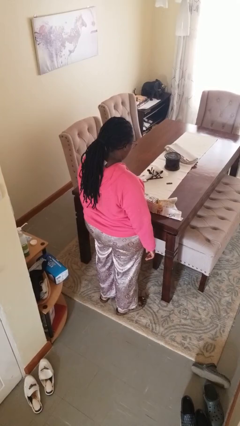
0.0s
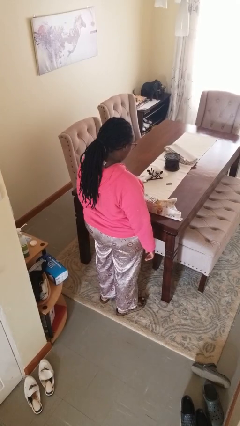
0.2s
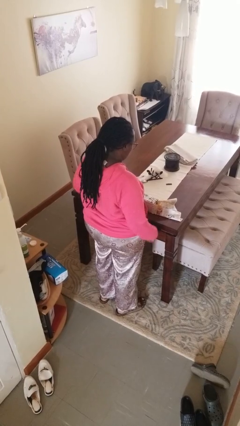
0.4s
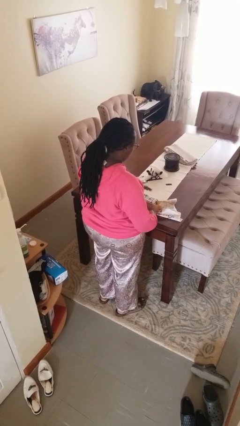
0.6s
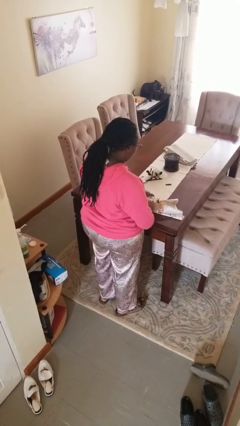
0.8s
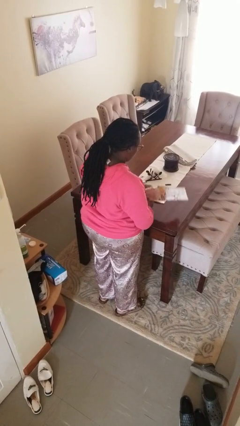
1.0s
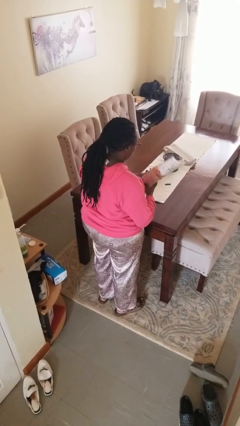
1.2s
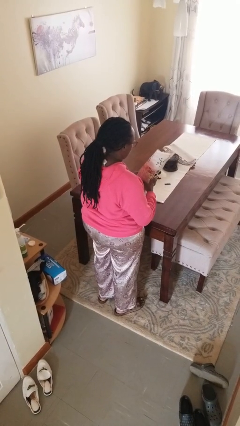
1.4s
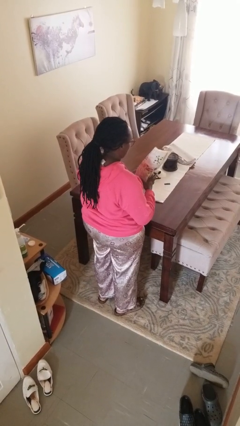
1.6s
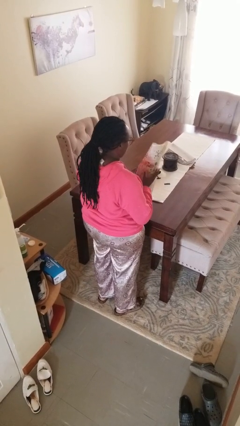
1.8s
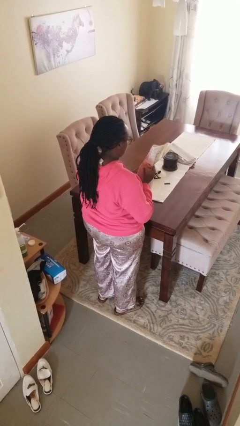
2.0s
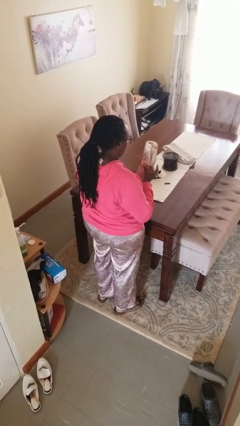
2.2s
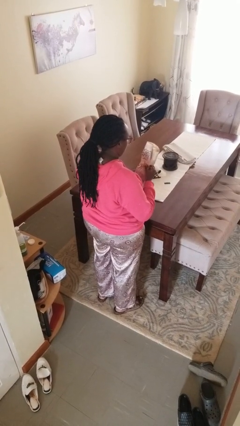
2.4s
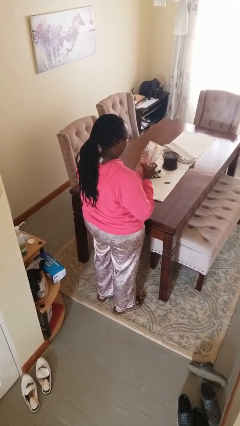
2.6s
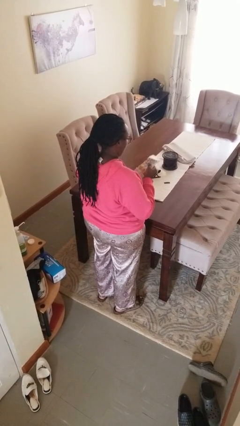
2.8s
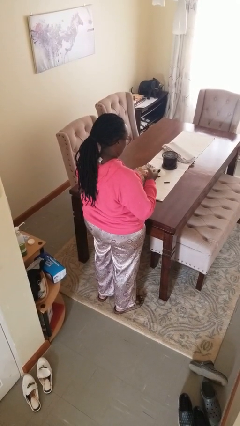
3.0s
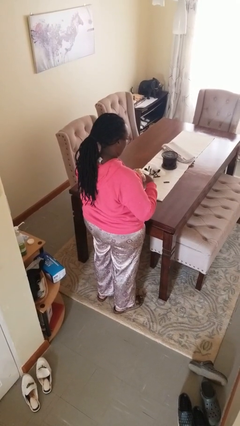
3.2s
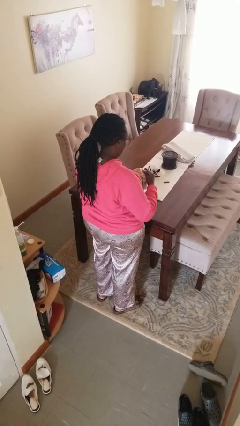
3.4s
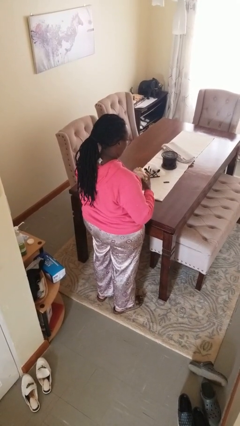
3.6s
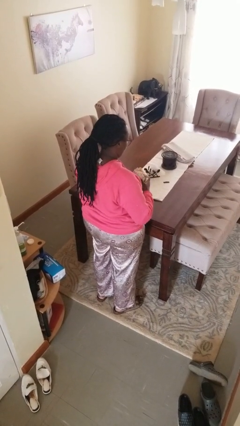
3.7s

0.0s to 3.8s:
person wraps box

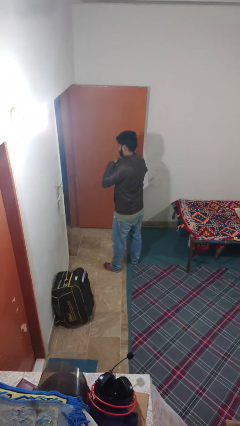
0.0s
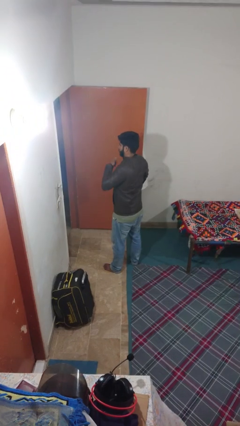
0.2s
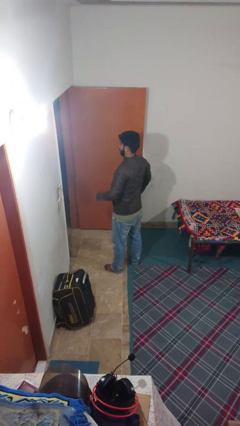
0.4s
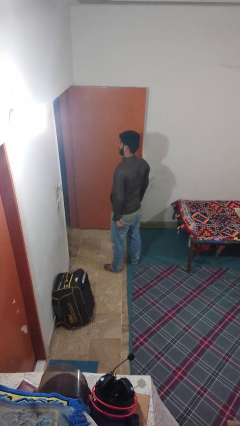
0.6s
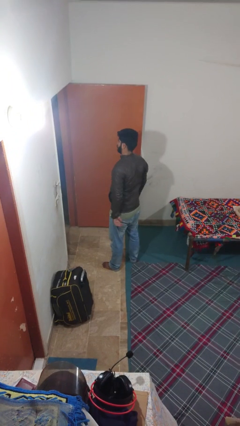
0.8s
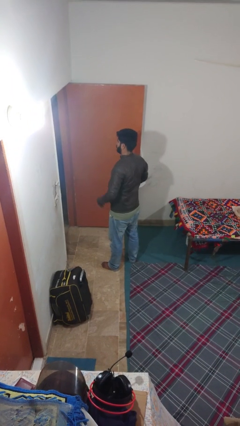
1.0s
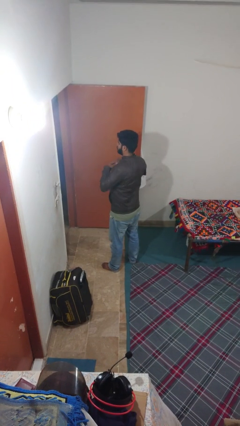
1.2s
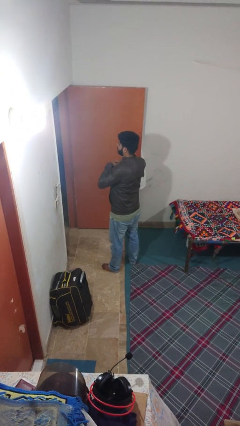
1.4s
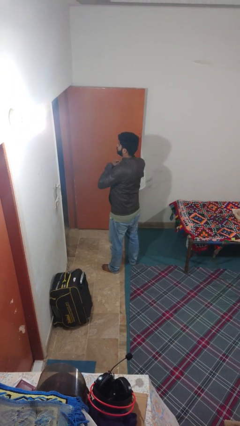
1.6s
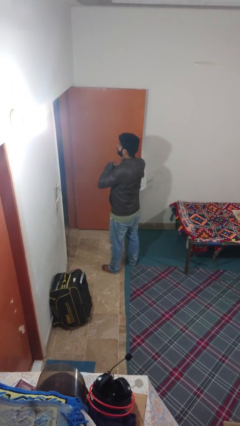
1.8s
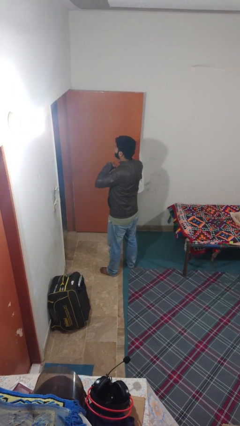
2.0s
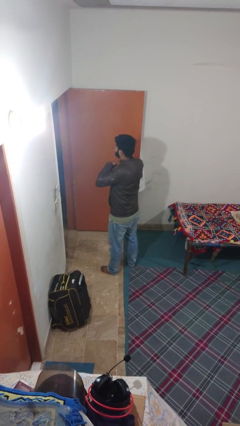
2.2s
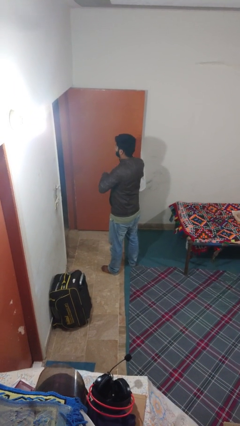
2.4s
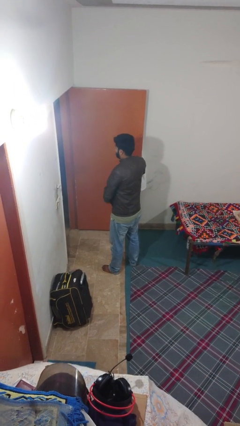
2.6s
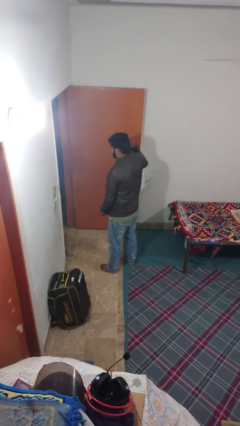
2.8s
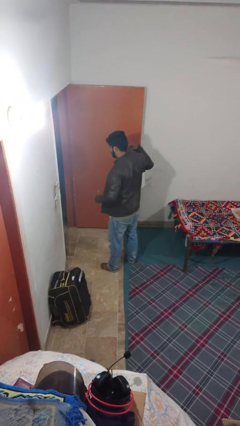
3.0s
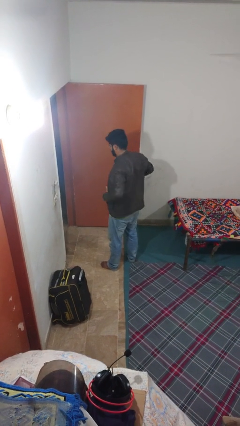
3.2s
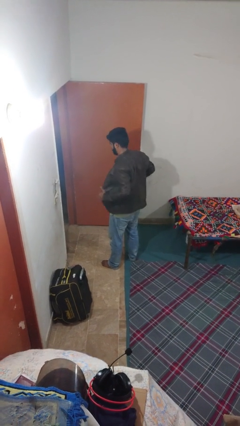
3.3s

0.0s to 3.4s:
person unzips jacket

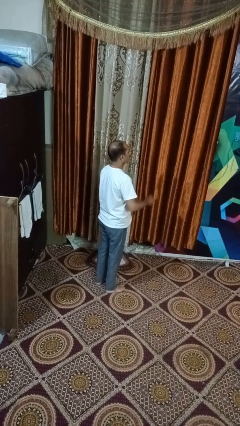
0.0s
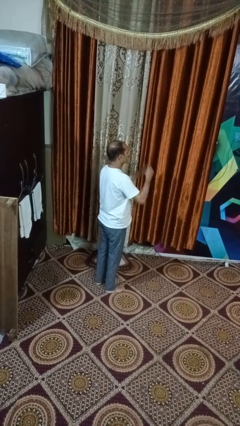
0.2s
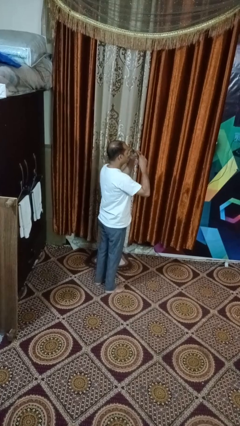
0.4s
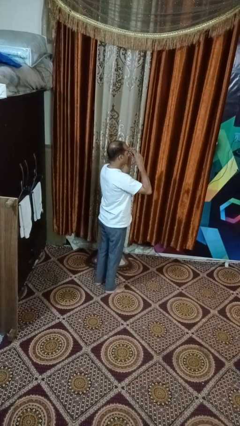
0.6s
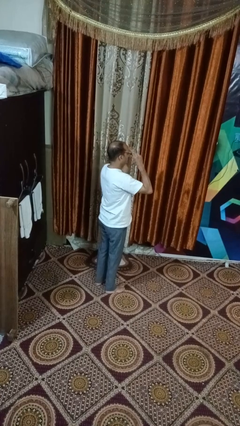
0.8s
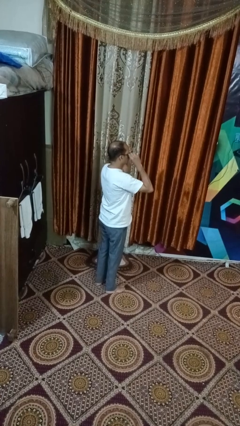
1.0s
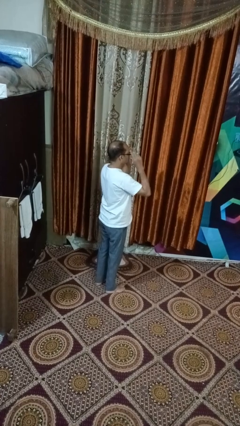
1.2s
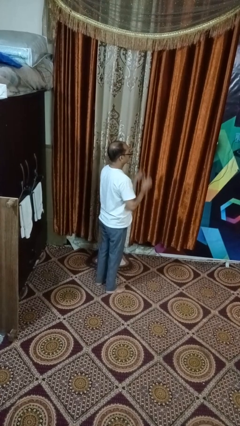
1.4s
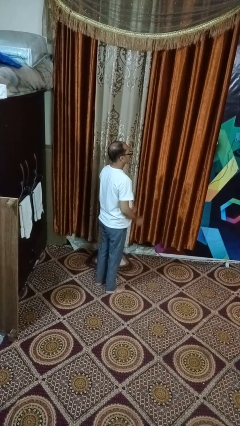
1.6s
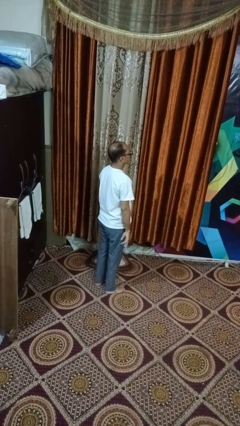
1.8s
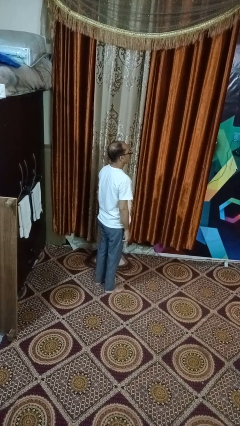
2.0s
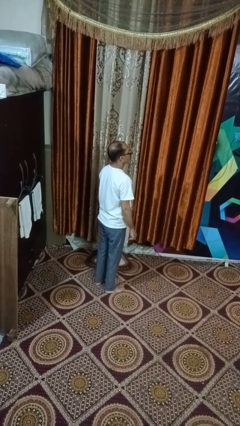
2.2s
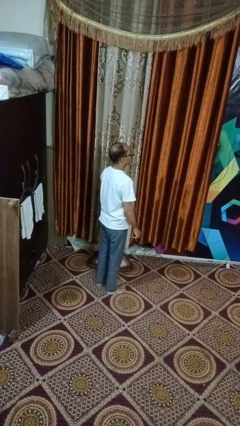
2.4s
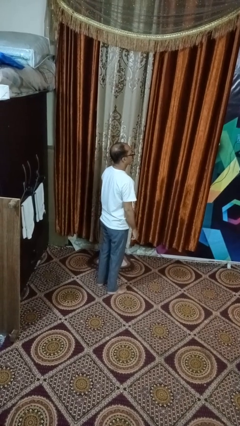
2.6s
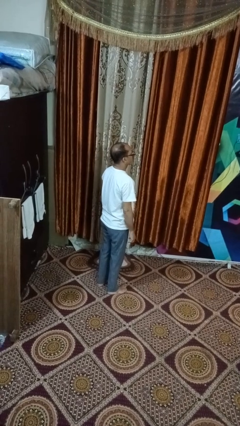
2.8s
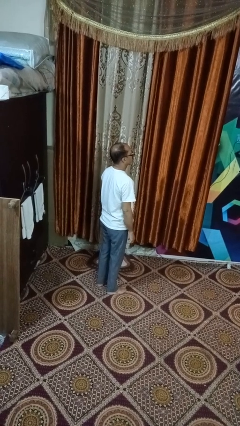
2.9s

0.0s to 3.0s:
person puts on glasses

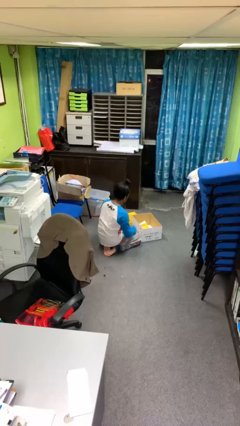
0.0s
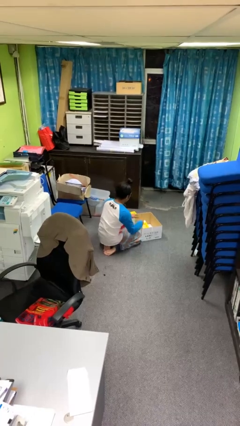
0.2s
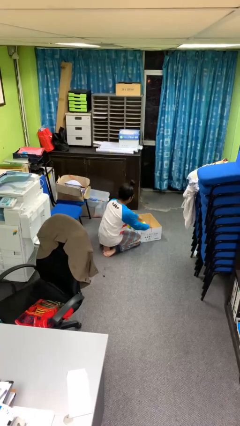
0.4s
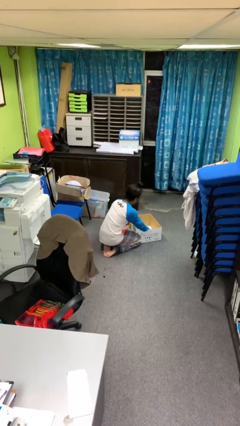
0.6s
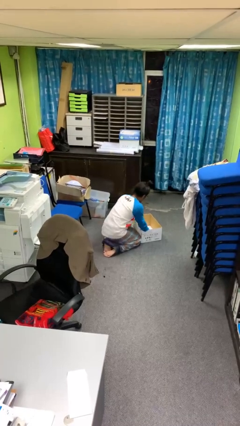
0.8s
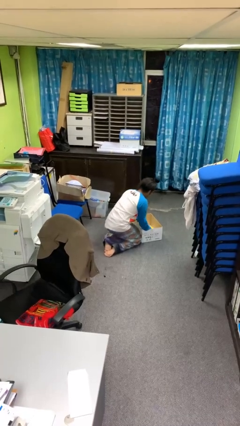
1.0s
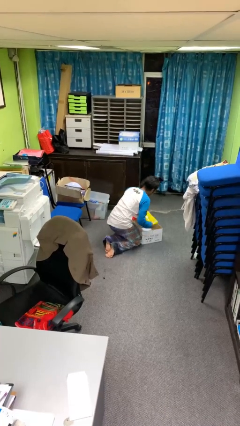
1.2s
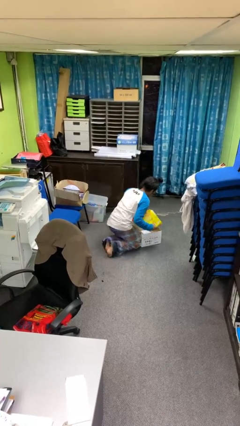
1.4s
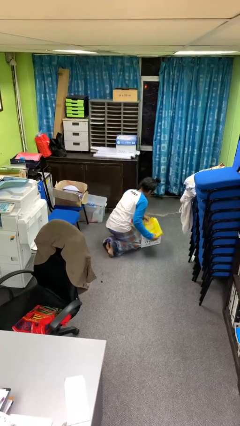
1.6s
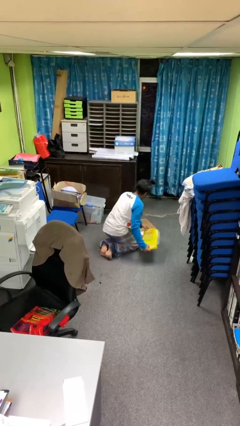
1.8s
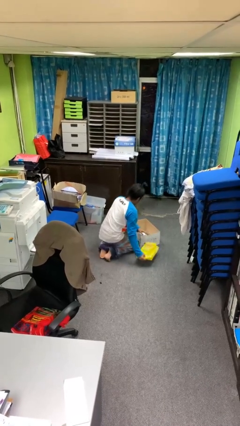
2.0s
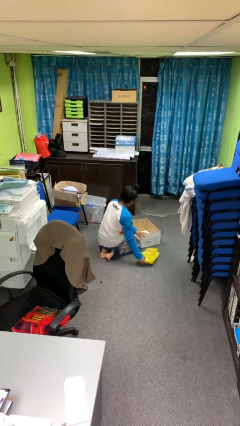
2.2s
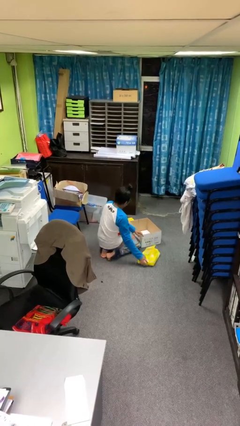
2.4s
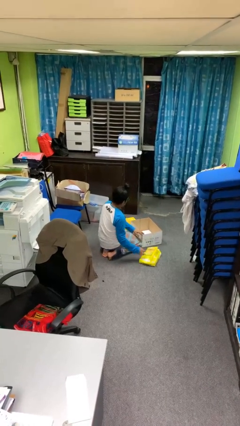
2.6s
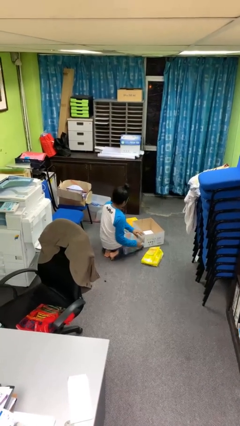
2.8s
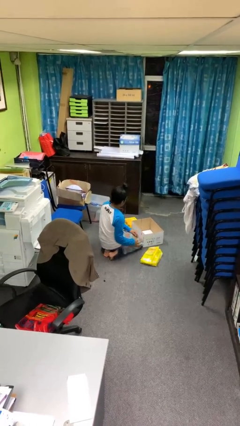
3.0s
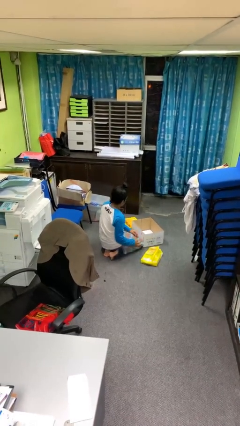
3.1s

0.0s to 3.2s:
person takes object from box

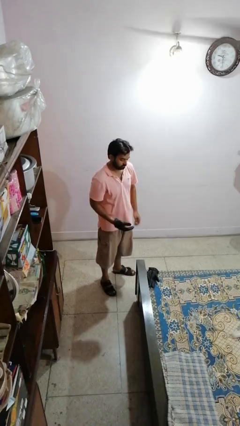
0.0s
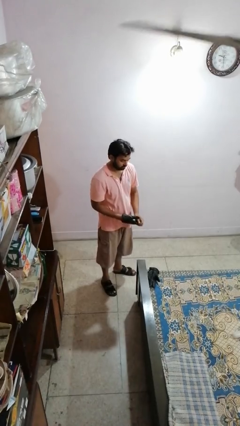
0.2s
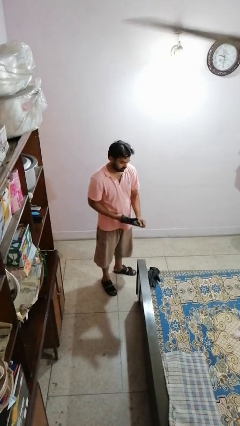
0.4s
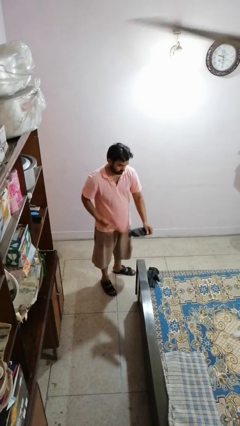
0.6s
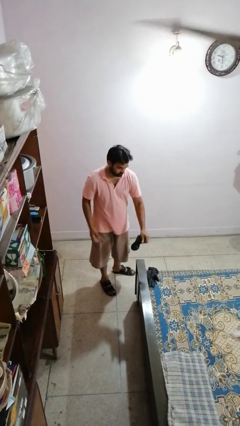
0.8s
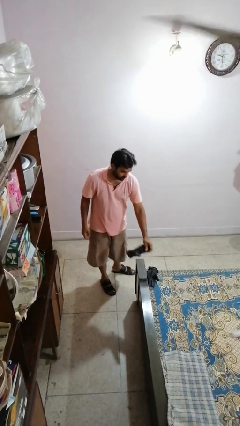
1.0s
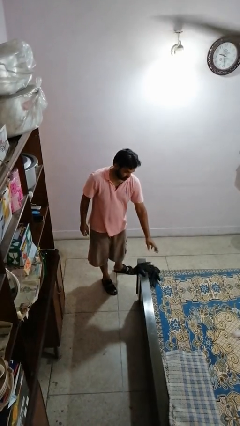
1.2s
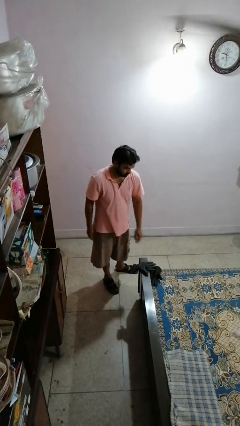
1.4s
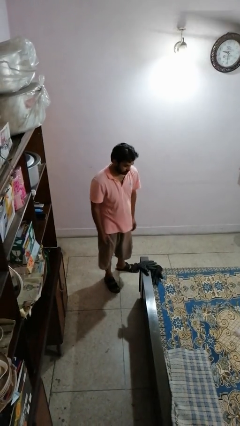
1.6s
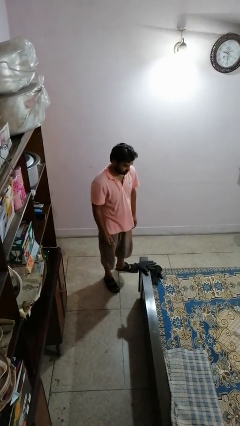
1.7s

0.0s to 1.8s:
person takes off gloves

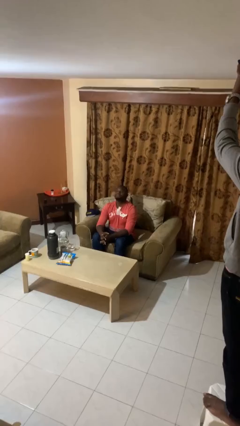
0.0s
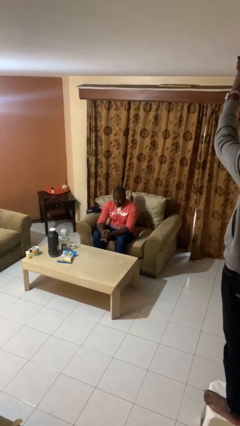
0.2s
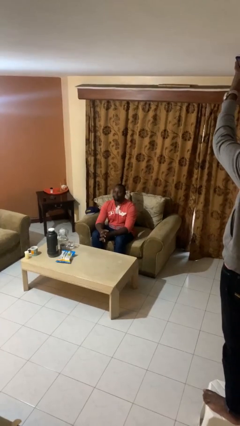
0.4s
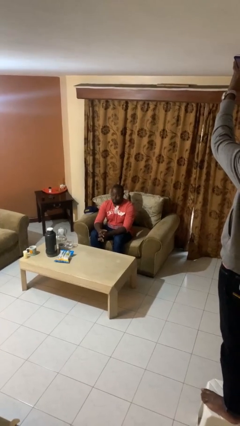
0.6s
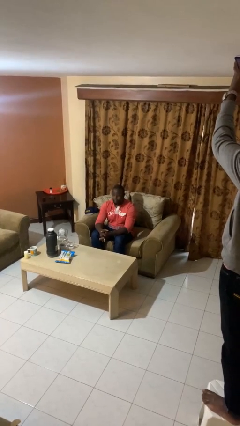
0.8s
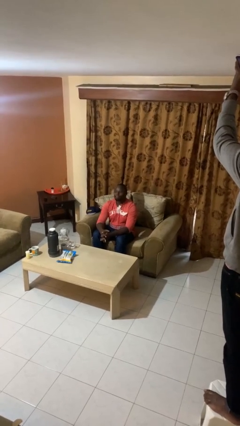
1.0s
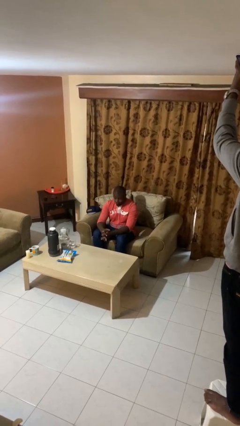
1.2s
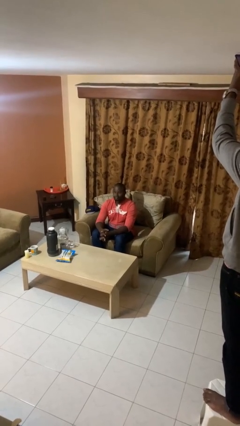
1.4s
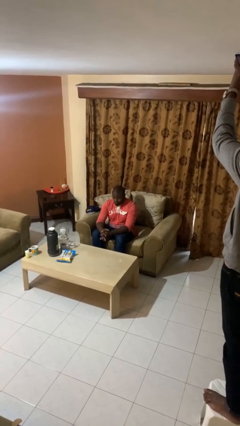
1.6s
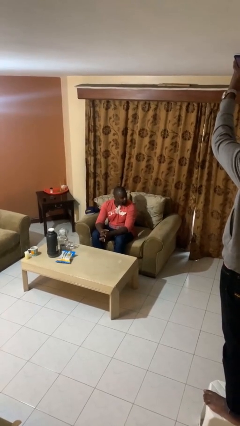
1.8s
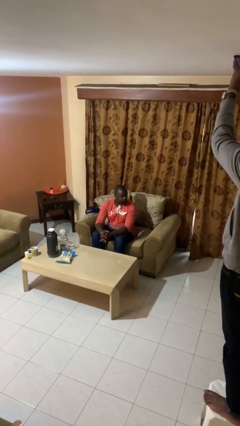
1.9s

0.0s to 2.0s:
person nods head

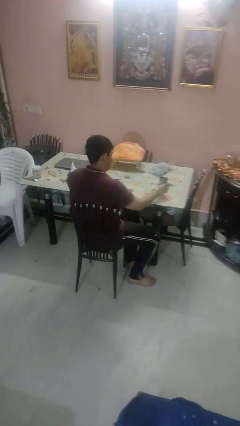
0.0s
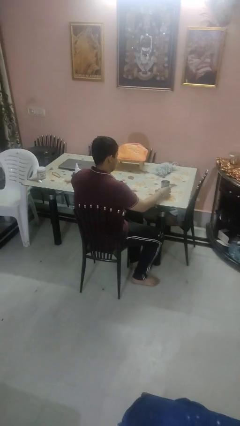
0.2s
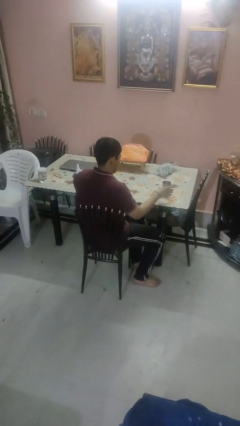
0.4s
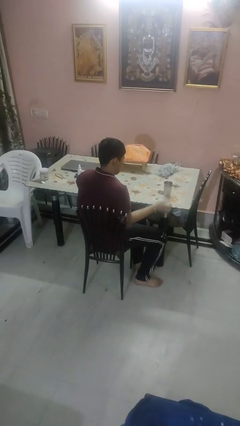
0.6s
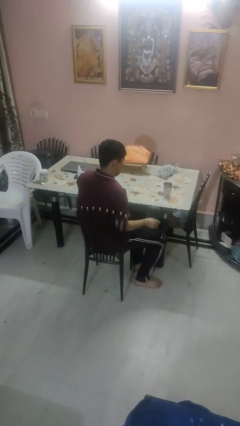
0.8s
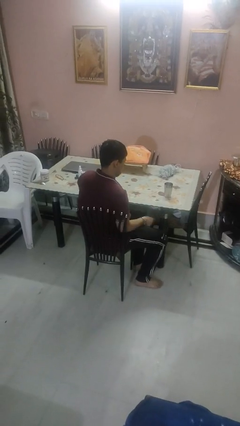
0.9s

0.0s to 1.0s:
person sets upright glass
